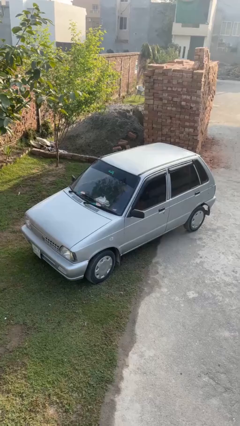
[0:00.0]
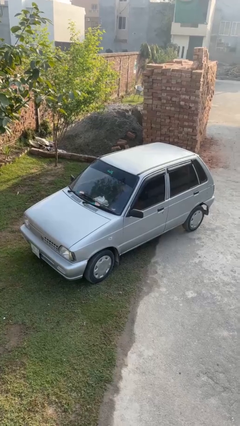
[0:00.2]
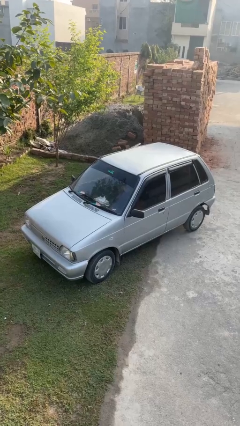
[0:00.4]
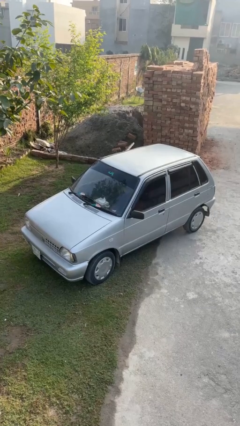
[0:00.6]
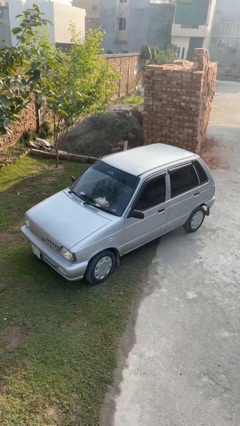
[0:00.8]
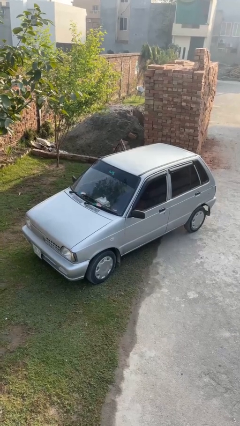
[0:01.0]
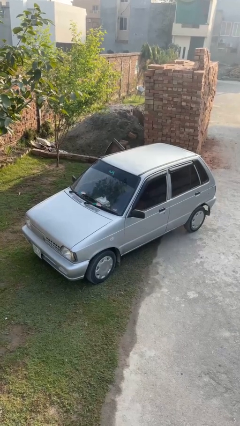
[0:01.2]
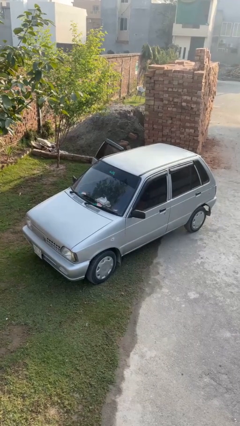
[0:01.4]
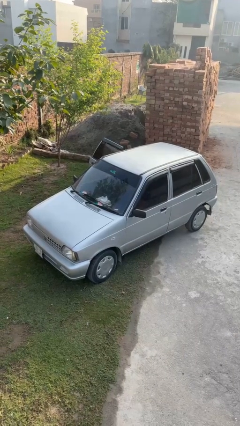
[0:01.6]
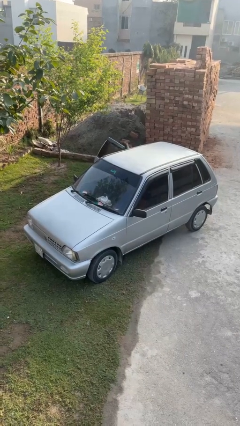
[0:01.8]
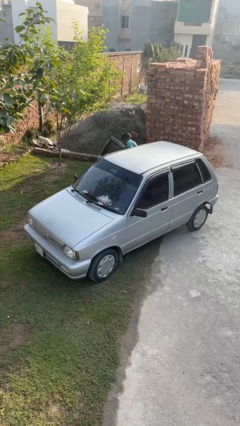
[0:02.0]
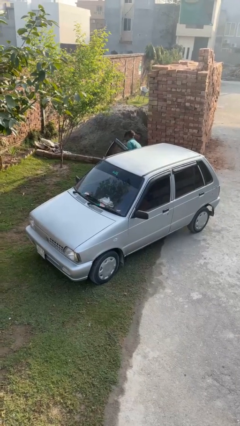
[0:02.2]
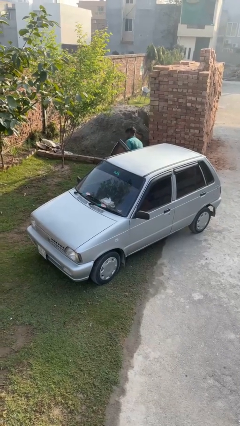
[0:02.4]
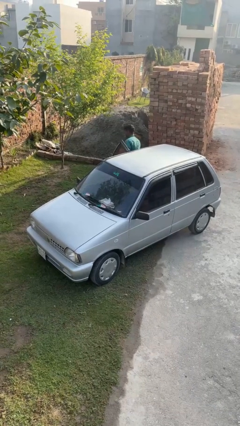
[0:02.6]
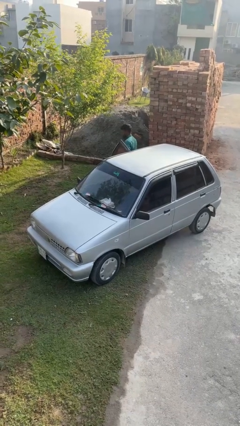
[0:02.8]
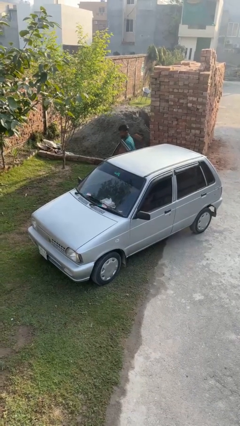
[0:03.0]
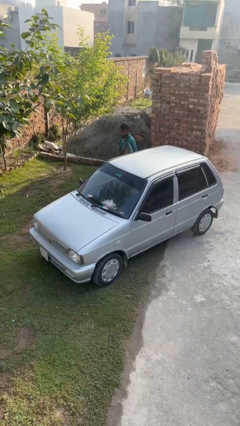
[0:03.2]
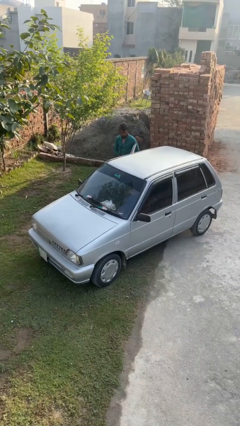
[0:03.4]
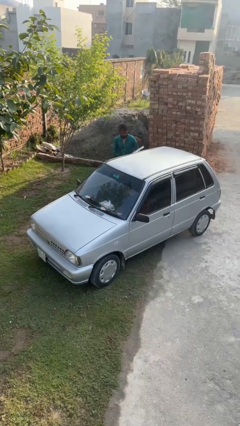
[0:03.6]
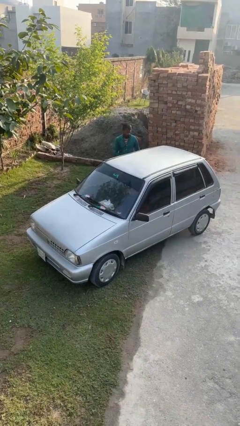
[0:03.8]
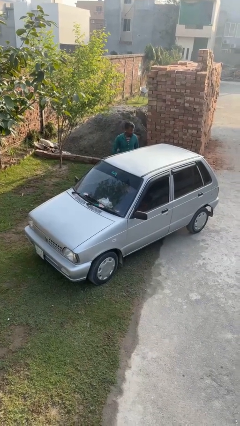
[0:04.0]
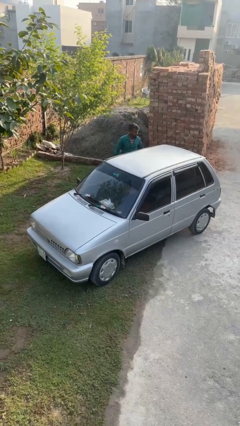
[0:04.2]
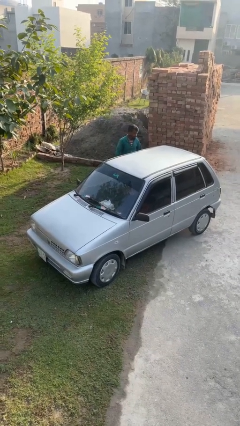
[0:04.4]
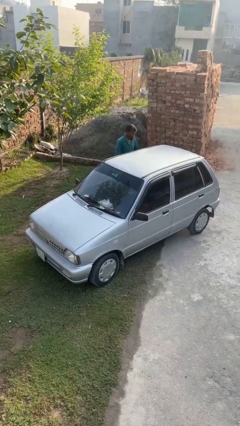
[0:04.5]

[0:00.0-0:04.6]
car drops off person

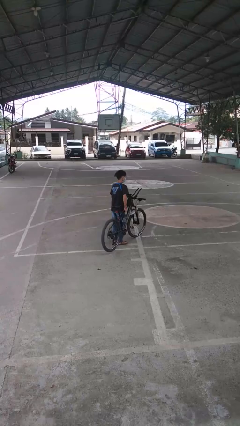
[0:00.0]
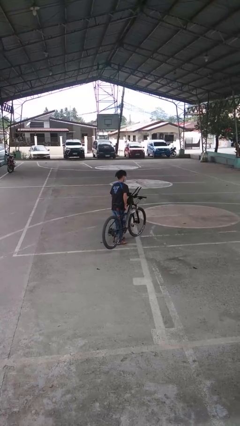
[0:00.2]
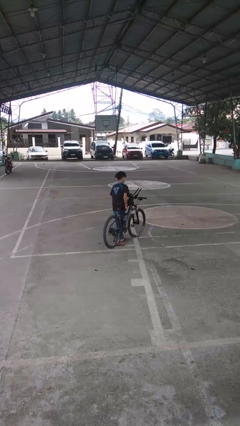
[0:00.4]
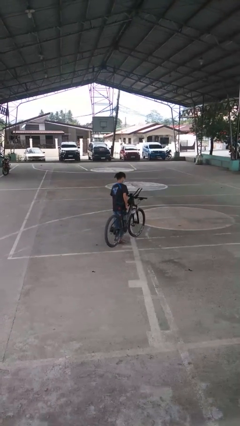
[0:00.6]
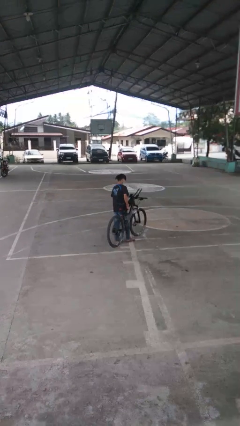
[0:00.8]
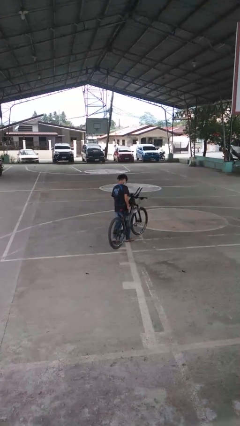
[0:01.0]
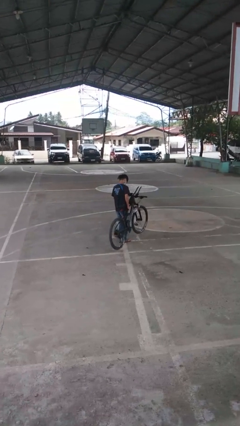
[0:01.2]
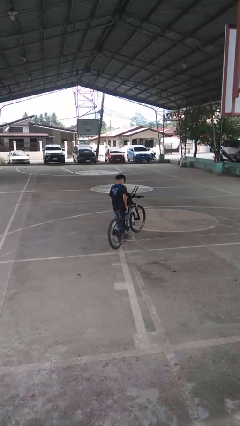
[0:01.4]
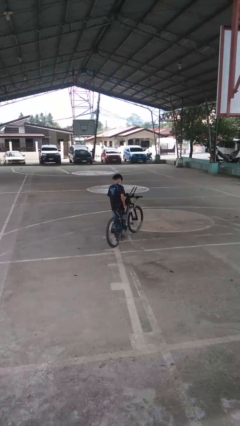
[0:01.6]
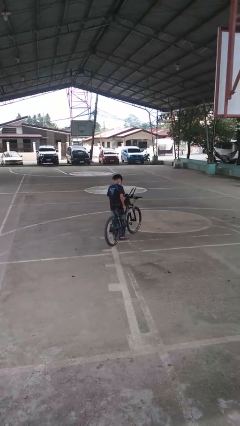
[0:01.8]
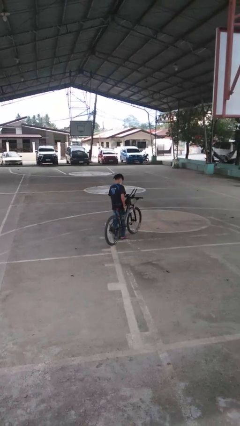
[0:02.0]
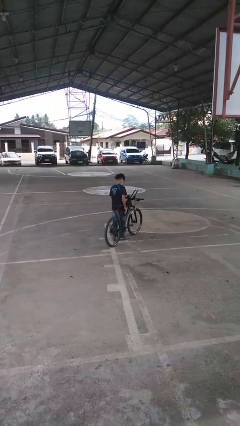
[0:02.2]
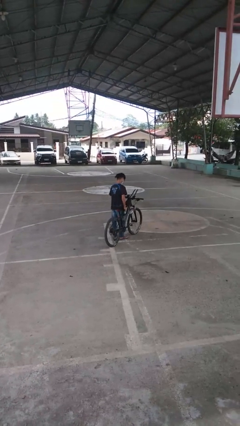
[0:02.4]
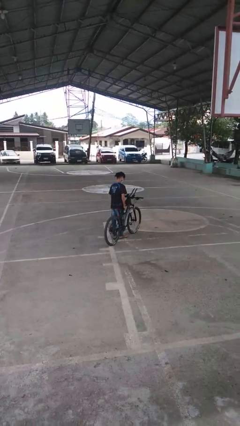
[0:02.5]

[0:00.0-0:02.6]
person carries bicycle

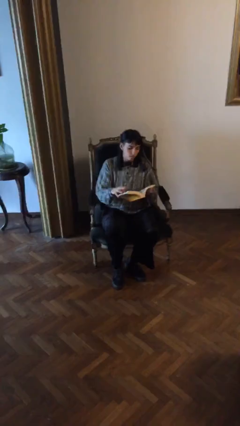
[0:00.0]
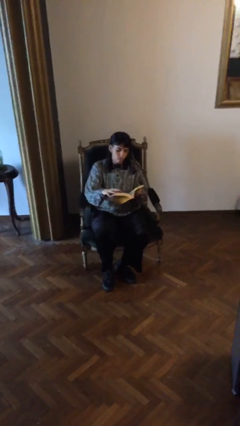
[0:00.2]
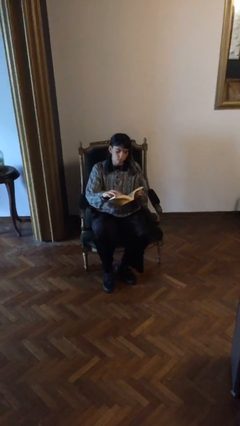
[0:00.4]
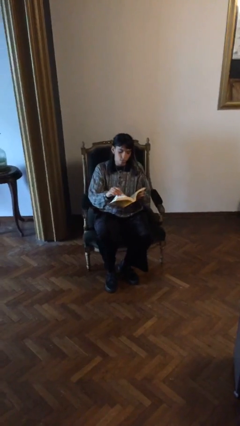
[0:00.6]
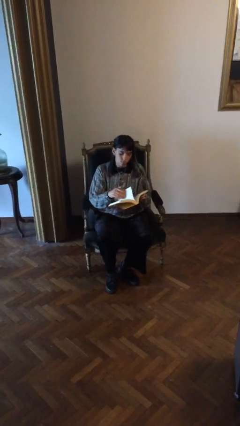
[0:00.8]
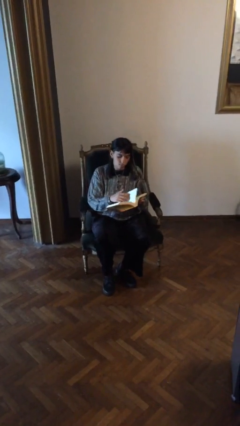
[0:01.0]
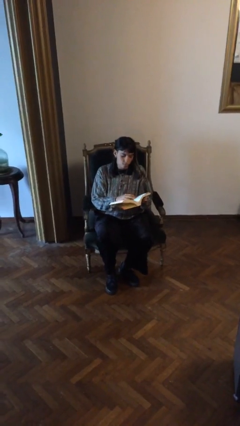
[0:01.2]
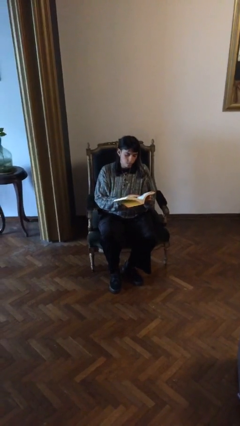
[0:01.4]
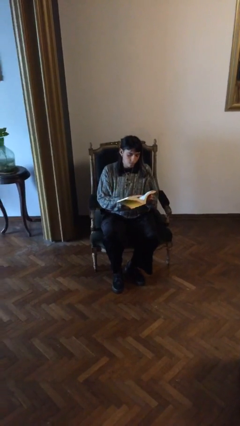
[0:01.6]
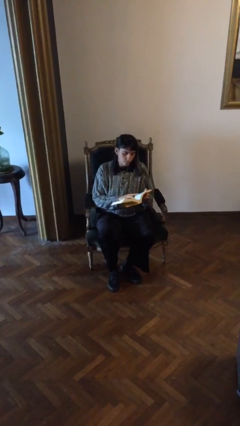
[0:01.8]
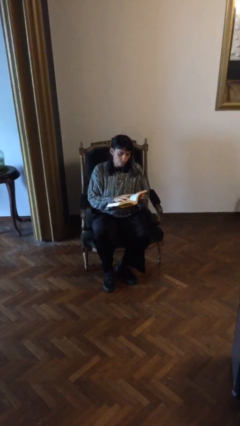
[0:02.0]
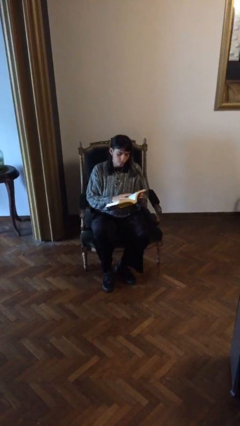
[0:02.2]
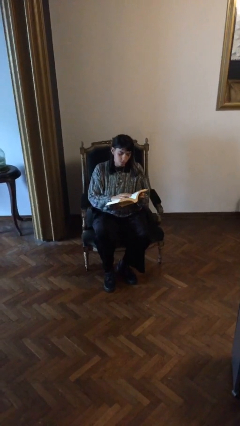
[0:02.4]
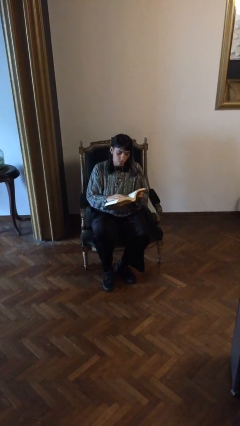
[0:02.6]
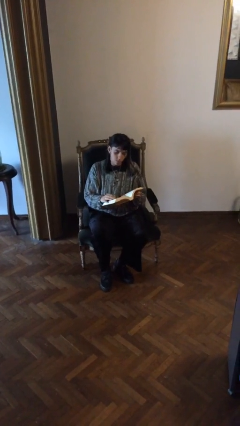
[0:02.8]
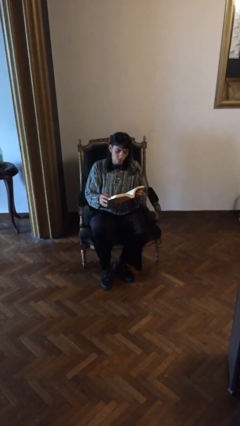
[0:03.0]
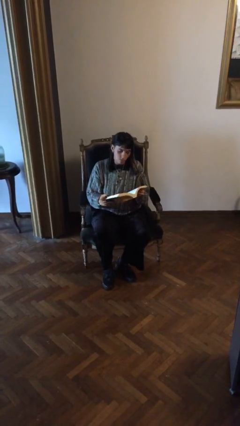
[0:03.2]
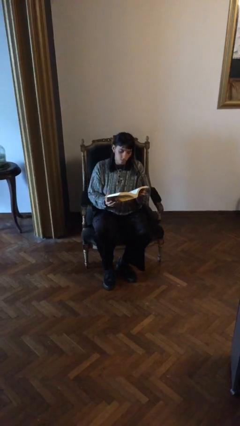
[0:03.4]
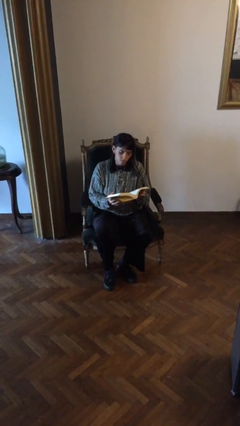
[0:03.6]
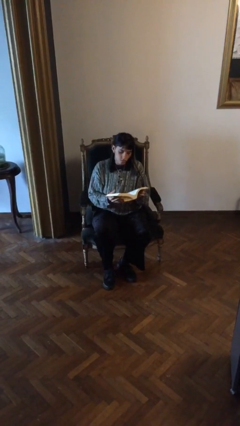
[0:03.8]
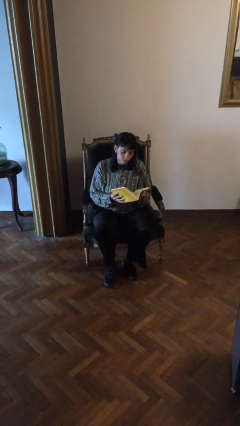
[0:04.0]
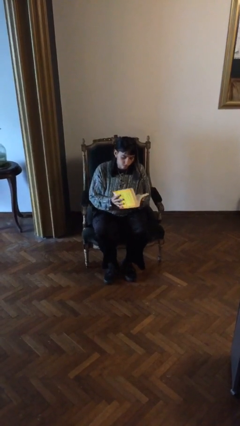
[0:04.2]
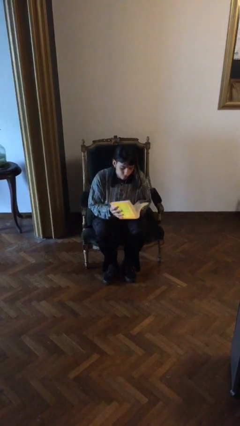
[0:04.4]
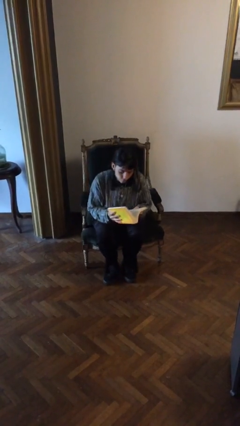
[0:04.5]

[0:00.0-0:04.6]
person reads document

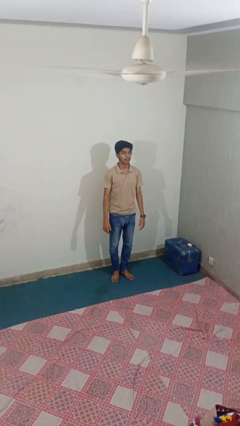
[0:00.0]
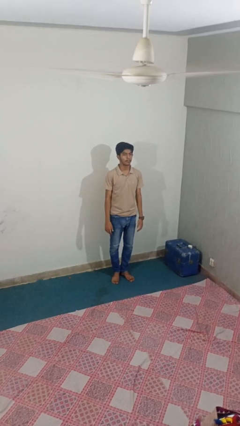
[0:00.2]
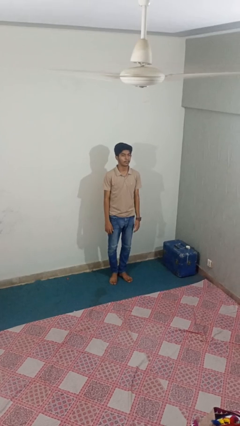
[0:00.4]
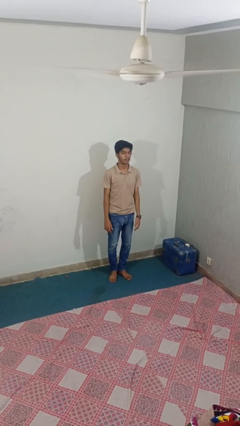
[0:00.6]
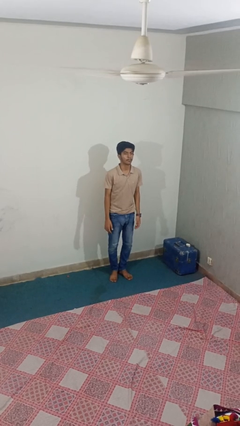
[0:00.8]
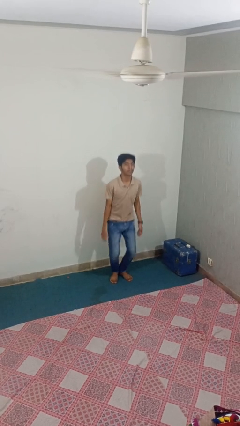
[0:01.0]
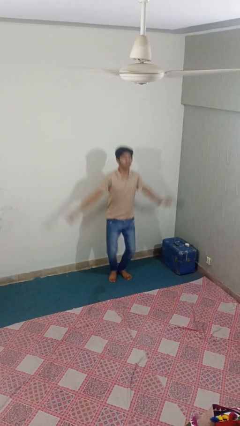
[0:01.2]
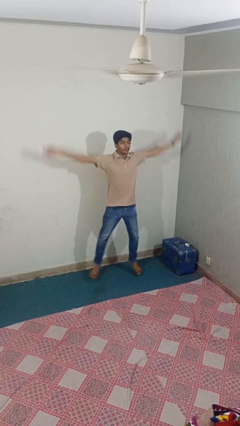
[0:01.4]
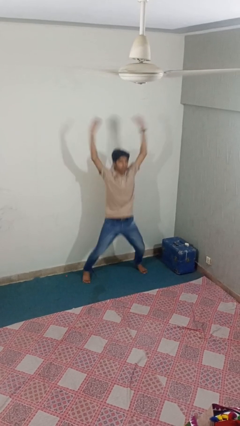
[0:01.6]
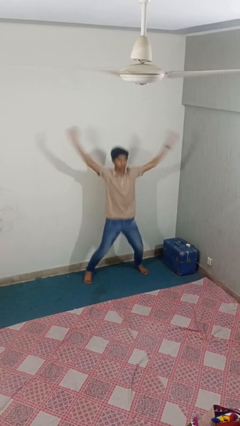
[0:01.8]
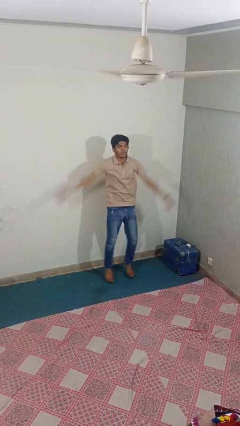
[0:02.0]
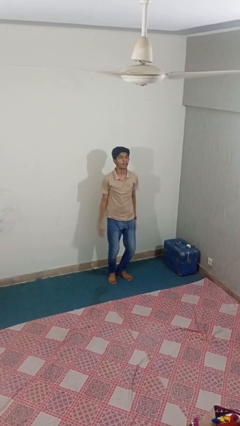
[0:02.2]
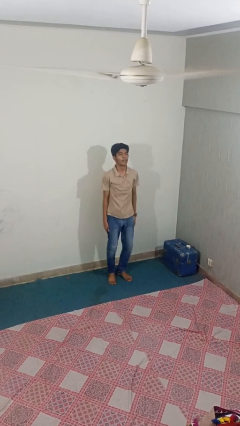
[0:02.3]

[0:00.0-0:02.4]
person exercises with jumping jacks

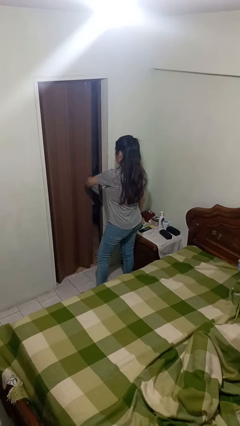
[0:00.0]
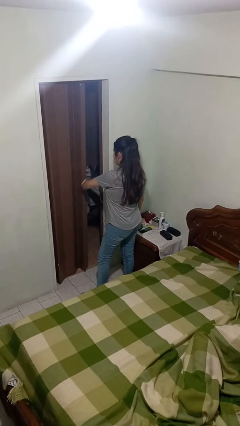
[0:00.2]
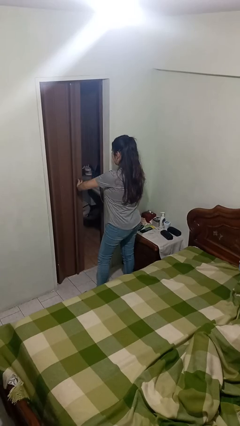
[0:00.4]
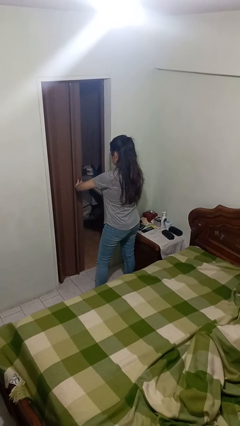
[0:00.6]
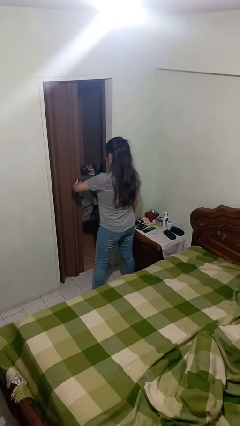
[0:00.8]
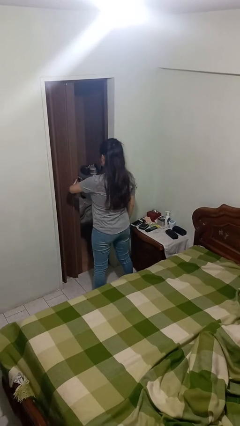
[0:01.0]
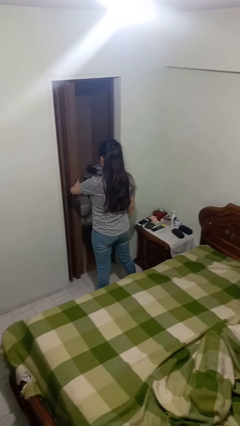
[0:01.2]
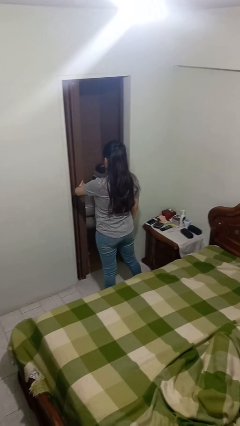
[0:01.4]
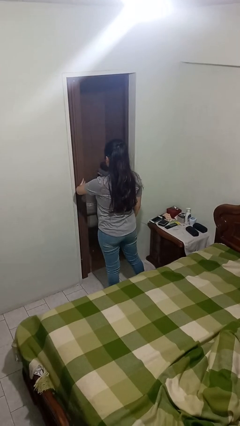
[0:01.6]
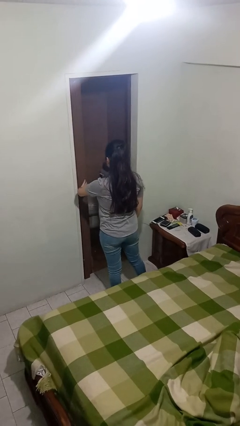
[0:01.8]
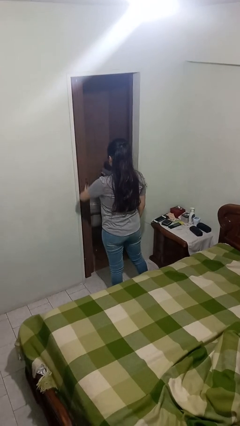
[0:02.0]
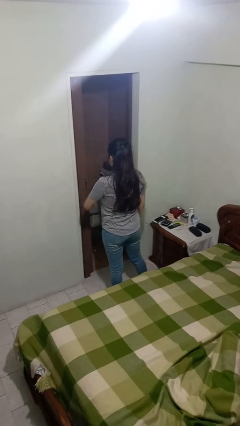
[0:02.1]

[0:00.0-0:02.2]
person opens sliding door

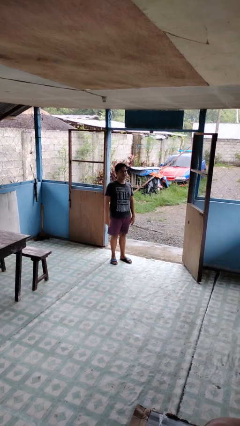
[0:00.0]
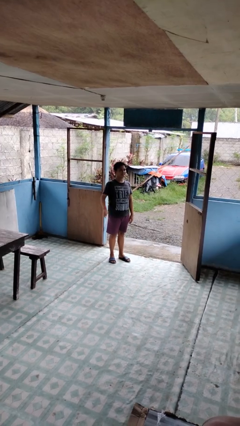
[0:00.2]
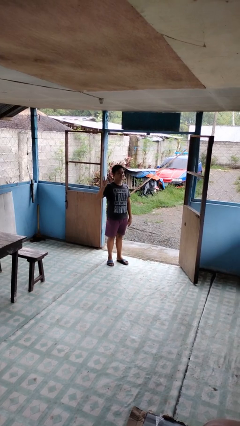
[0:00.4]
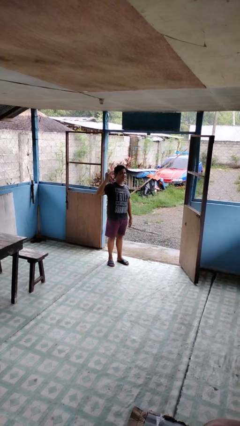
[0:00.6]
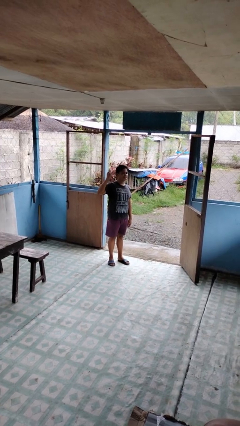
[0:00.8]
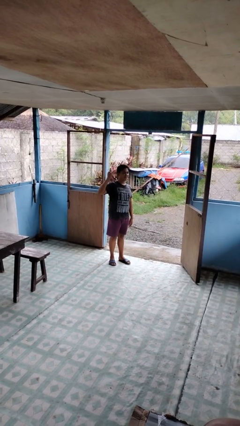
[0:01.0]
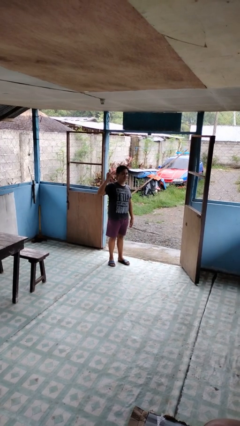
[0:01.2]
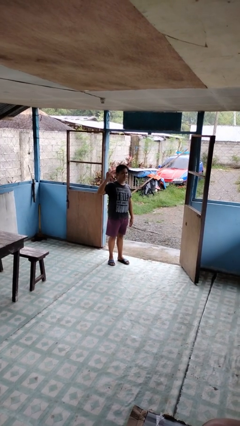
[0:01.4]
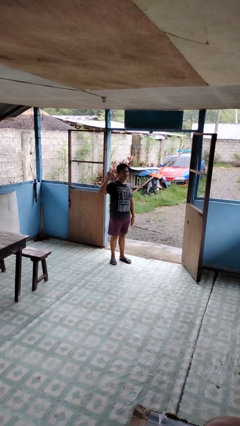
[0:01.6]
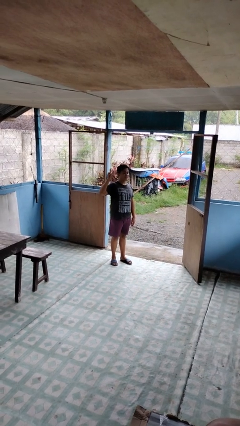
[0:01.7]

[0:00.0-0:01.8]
person gestures peace
